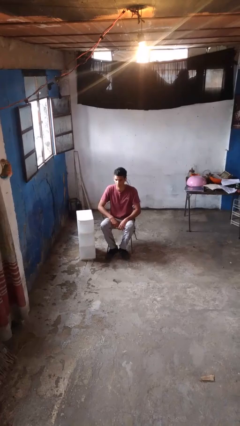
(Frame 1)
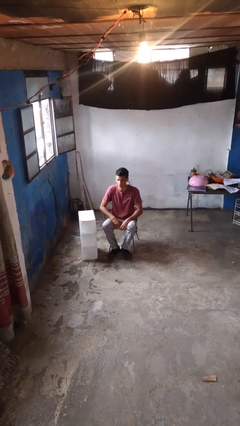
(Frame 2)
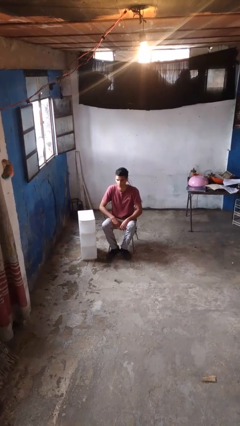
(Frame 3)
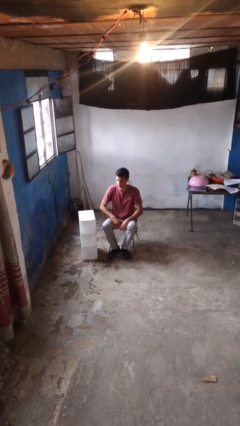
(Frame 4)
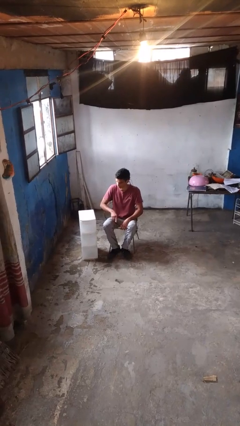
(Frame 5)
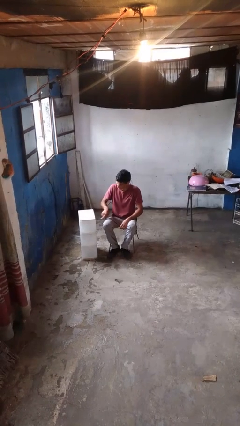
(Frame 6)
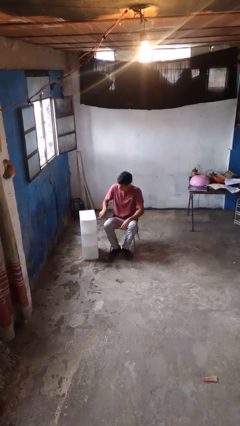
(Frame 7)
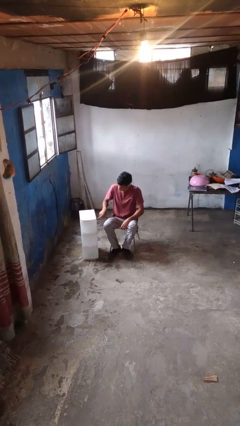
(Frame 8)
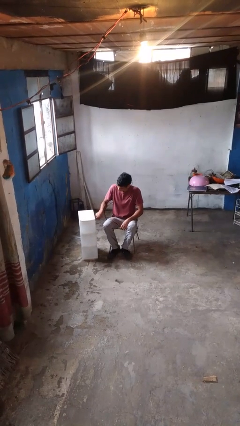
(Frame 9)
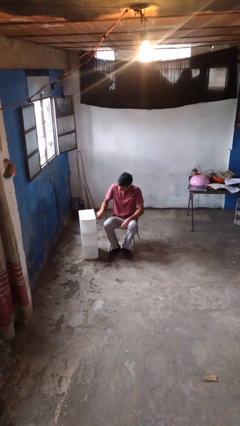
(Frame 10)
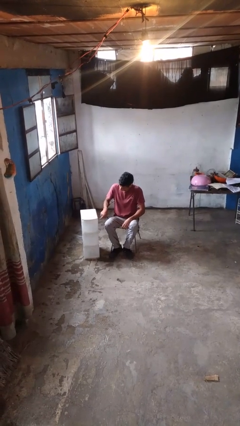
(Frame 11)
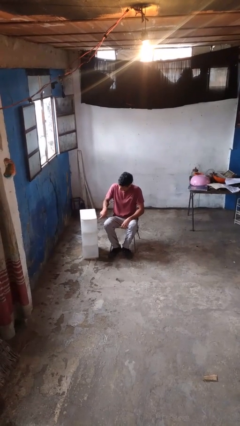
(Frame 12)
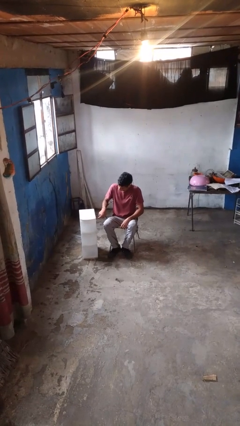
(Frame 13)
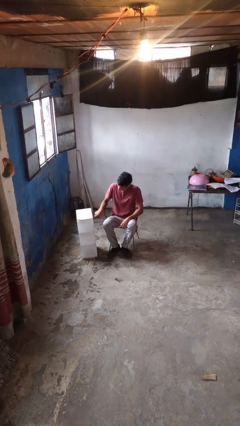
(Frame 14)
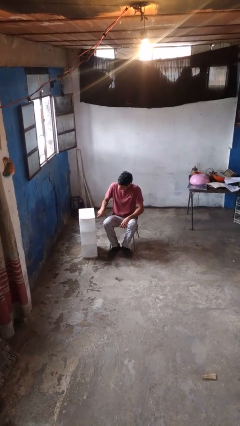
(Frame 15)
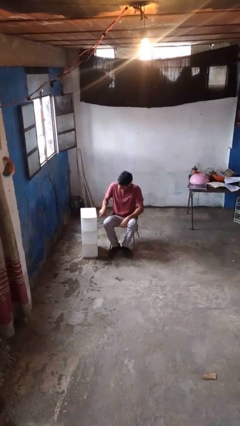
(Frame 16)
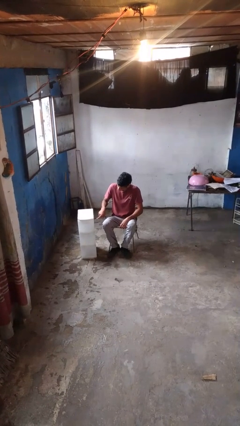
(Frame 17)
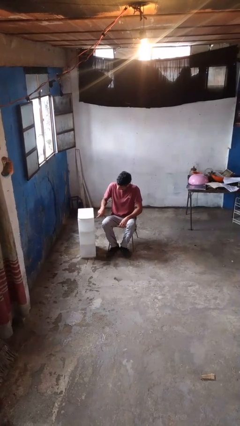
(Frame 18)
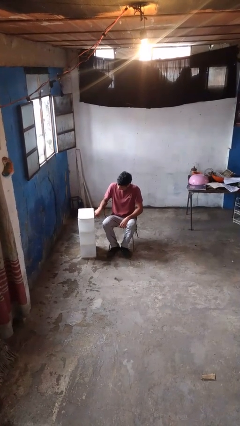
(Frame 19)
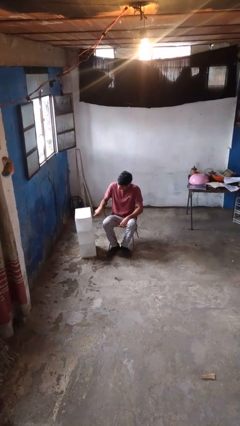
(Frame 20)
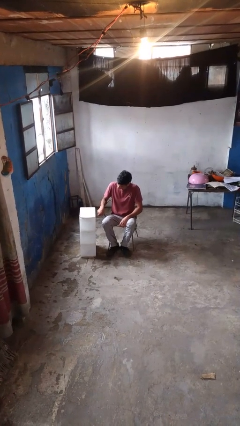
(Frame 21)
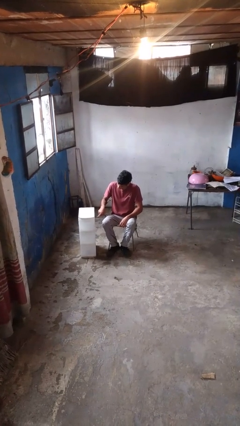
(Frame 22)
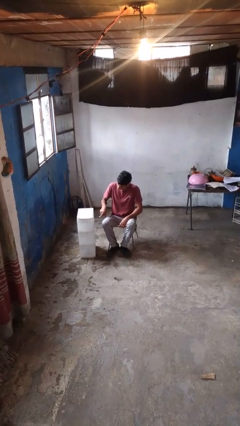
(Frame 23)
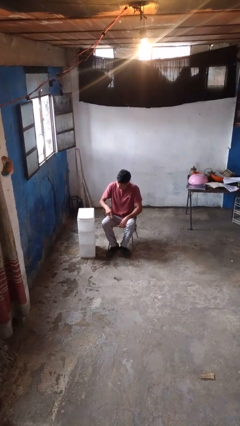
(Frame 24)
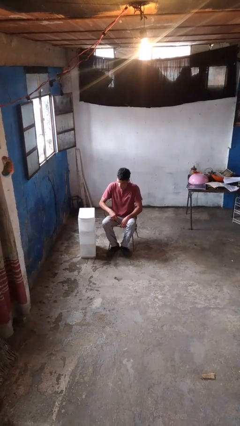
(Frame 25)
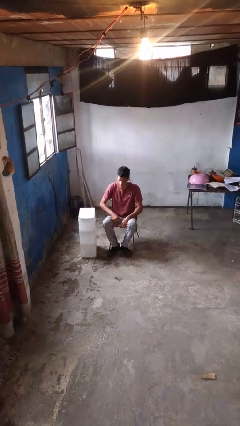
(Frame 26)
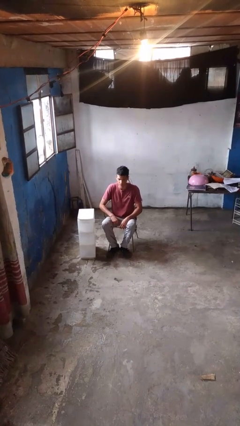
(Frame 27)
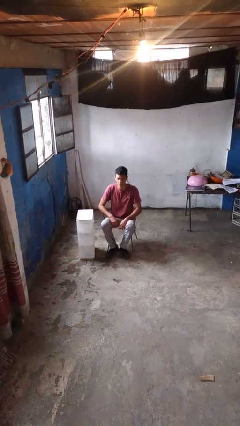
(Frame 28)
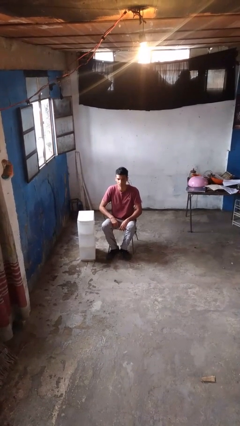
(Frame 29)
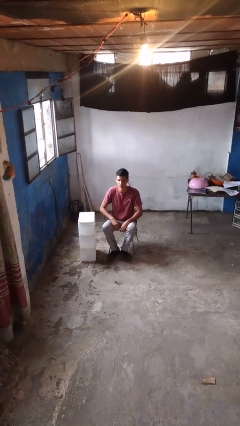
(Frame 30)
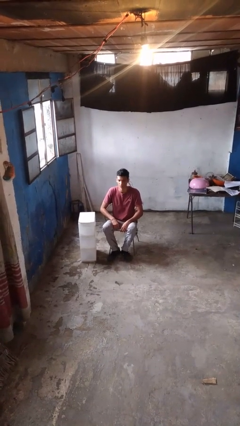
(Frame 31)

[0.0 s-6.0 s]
person taps object with finger

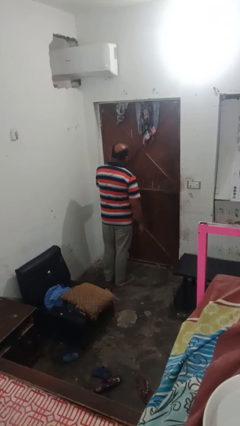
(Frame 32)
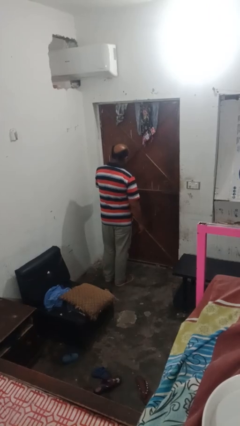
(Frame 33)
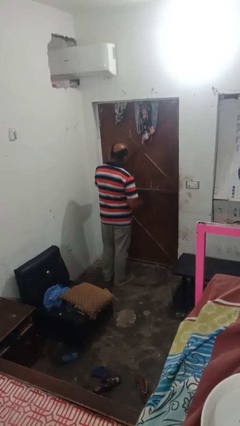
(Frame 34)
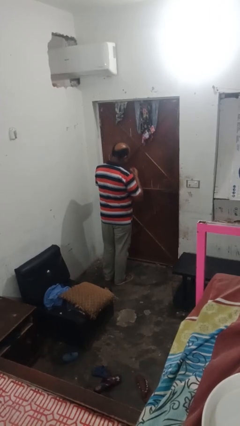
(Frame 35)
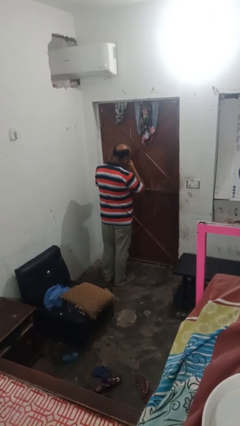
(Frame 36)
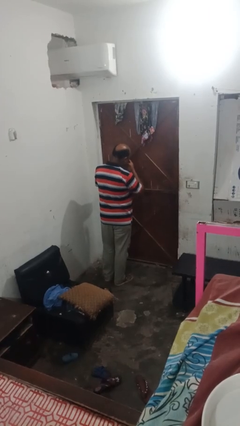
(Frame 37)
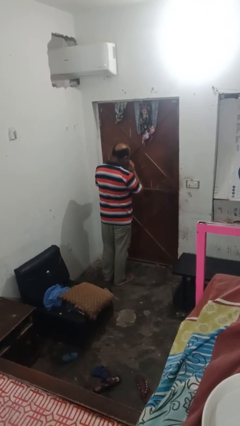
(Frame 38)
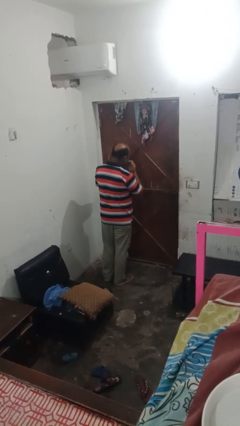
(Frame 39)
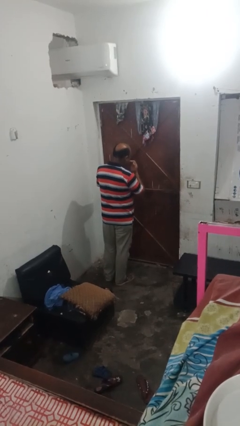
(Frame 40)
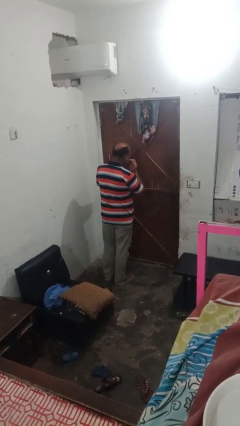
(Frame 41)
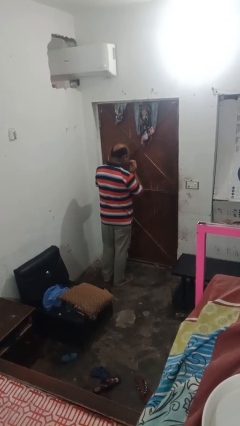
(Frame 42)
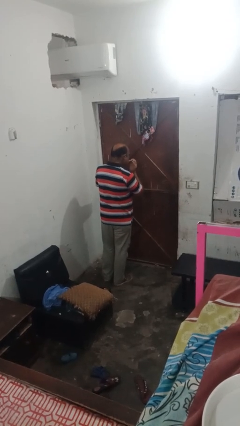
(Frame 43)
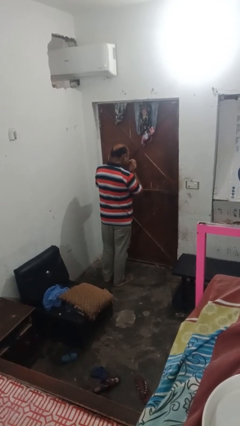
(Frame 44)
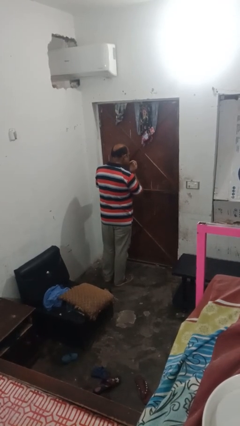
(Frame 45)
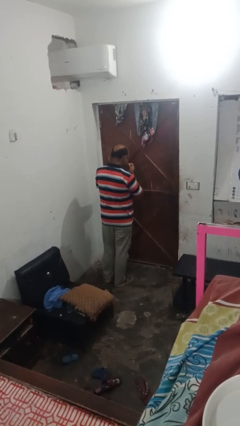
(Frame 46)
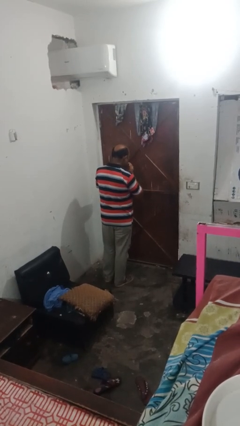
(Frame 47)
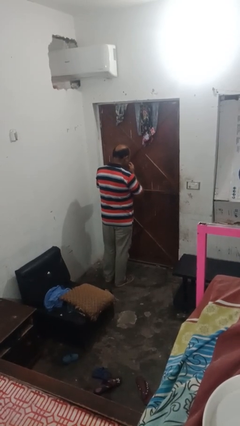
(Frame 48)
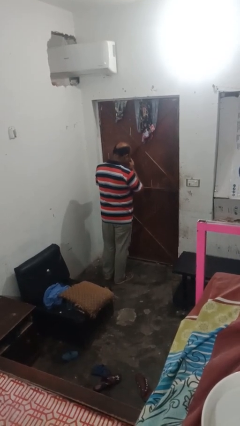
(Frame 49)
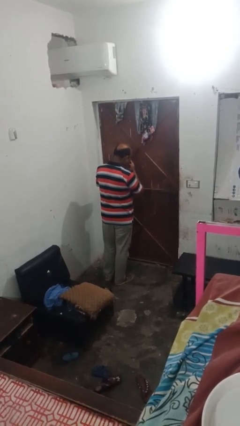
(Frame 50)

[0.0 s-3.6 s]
person licks fingers

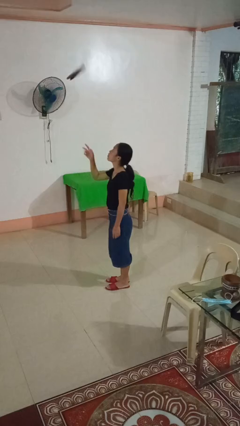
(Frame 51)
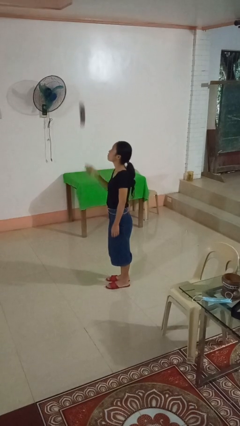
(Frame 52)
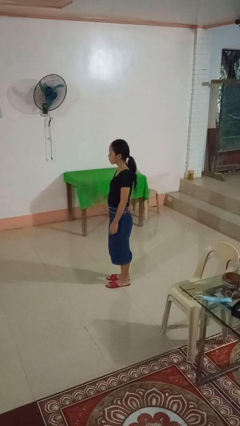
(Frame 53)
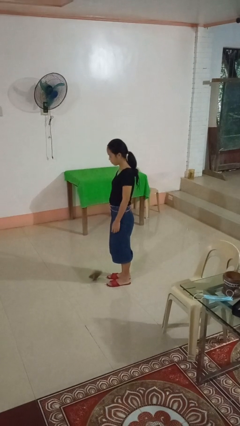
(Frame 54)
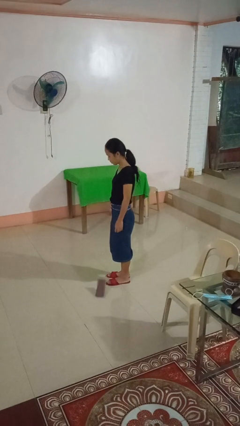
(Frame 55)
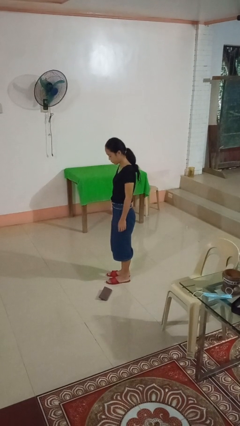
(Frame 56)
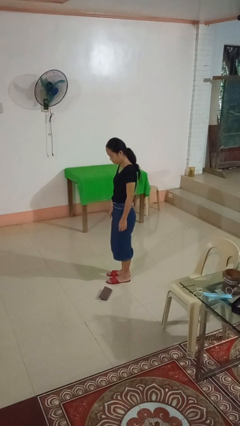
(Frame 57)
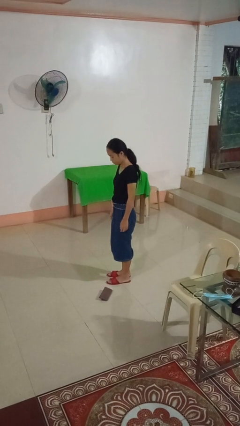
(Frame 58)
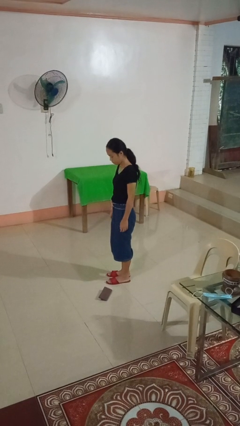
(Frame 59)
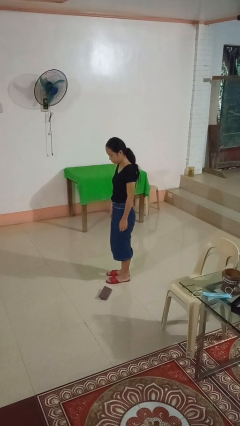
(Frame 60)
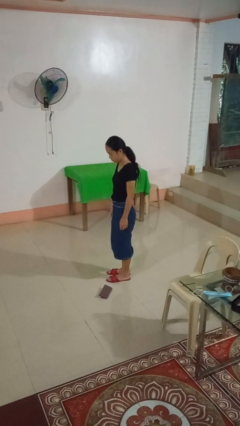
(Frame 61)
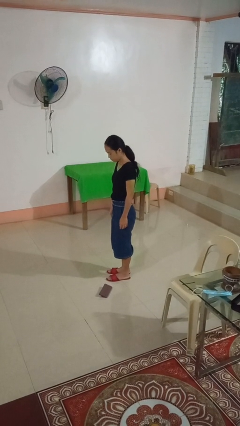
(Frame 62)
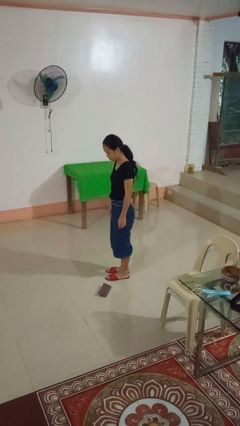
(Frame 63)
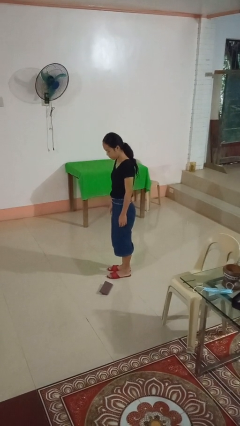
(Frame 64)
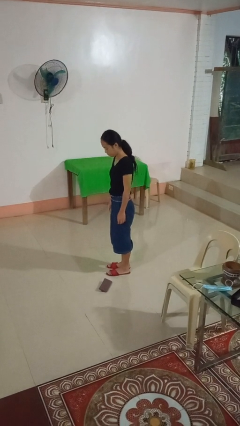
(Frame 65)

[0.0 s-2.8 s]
person throws object into air

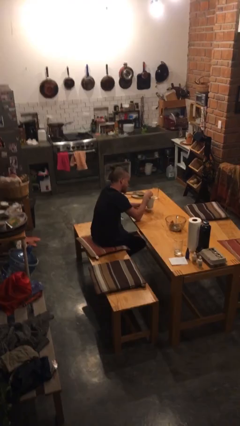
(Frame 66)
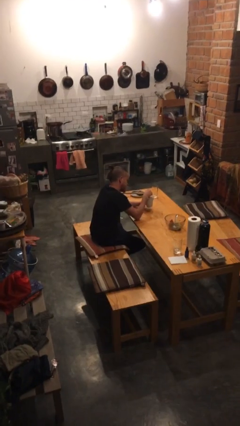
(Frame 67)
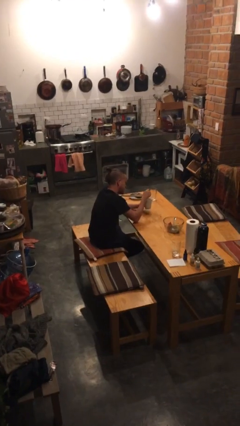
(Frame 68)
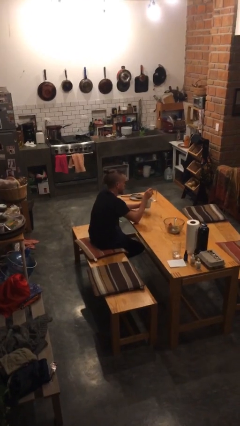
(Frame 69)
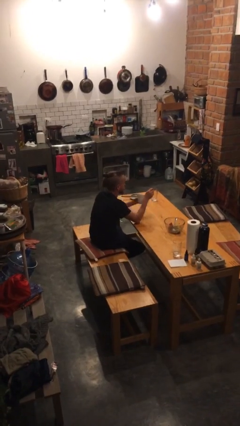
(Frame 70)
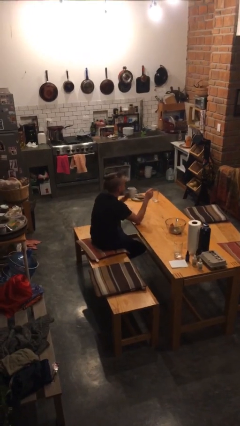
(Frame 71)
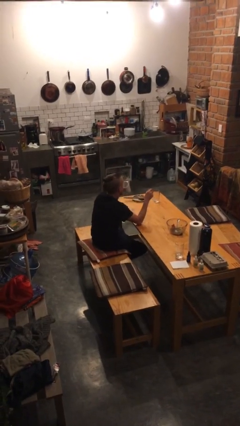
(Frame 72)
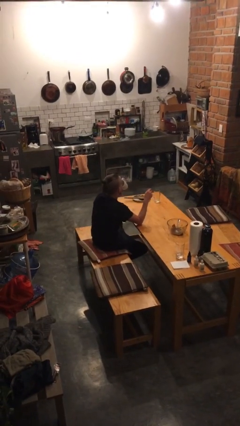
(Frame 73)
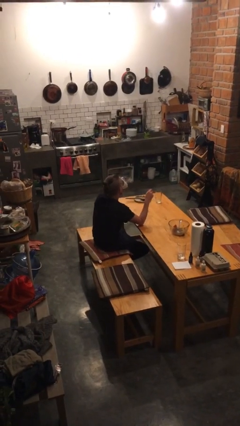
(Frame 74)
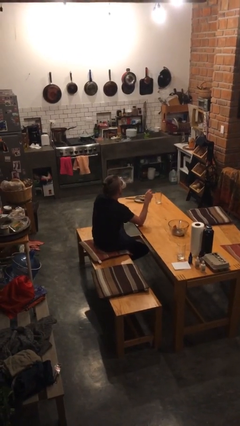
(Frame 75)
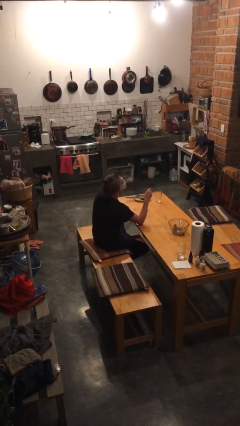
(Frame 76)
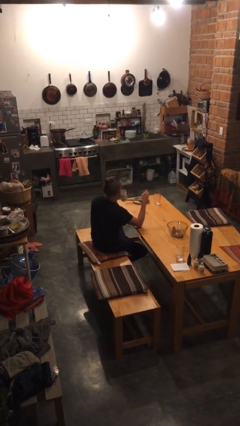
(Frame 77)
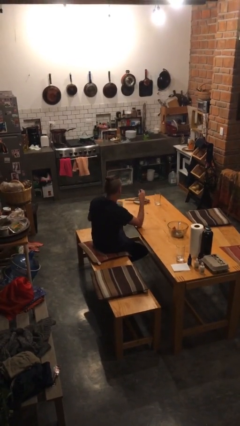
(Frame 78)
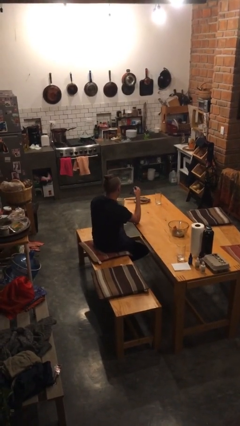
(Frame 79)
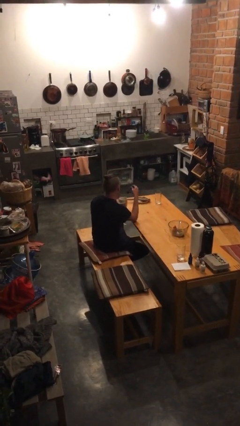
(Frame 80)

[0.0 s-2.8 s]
person drinks from mug

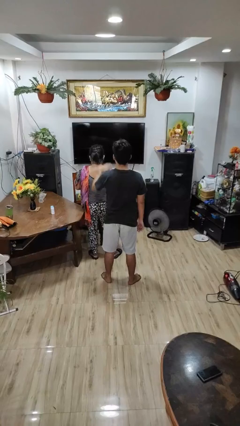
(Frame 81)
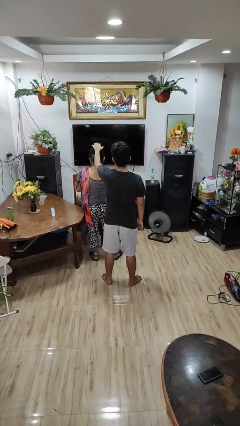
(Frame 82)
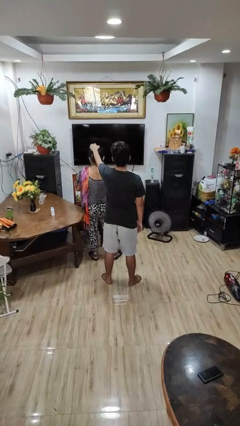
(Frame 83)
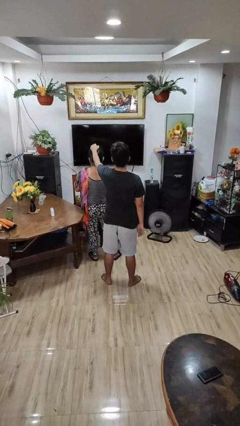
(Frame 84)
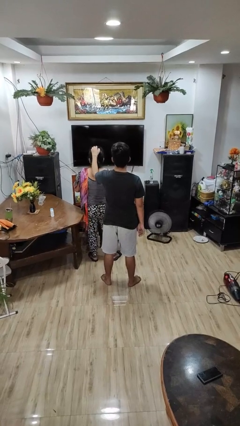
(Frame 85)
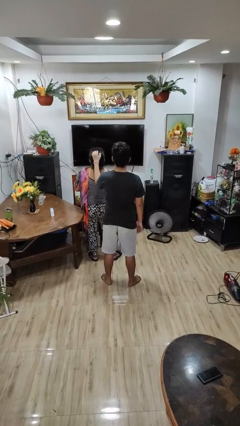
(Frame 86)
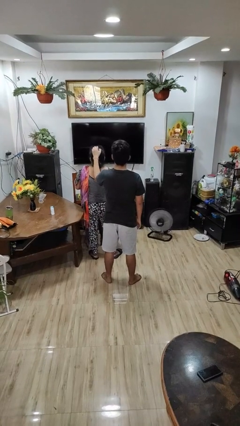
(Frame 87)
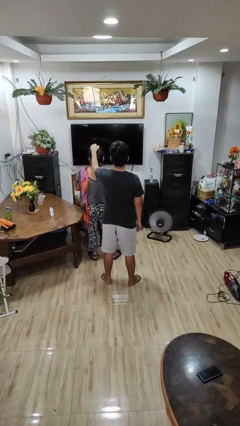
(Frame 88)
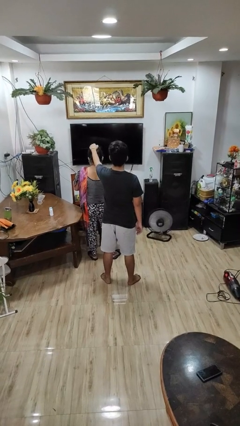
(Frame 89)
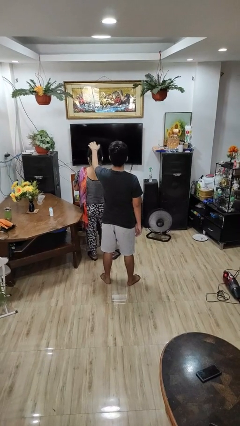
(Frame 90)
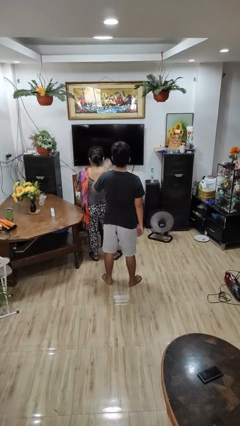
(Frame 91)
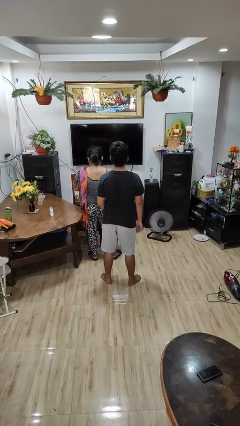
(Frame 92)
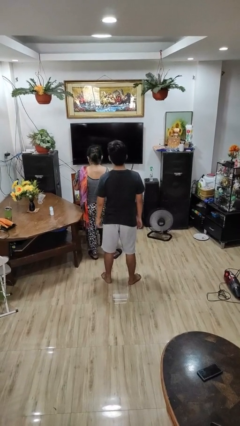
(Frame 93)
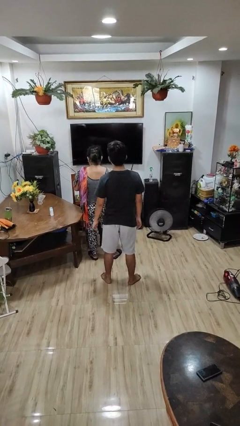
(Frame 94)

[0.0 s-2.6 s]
person grabs person by hair
